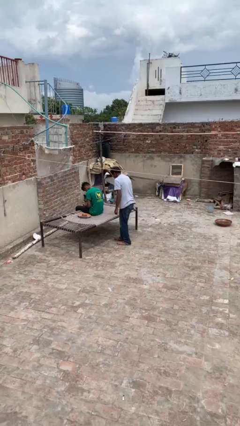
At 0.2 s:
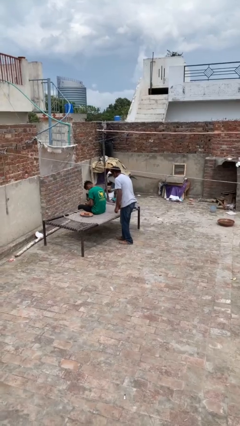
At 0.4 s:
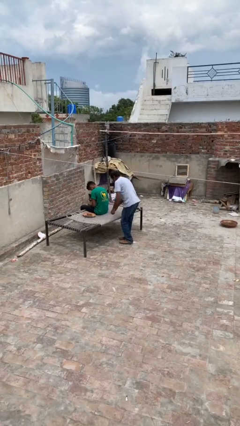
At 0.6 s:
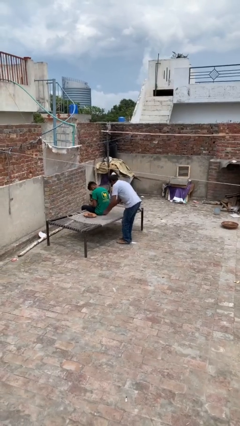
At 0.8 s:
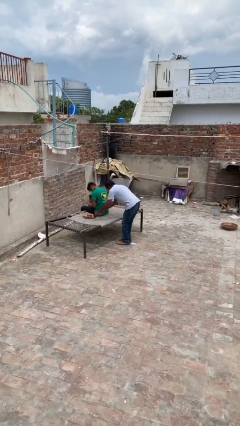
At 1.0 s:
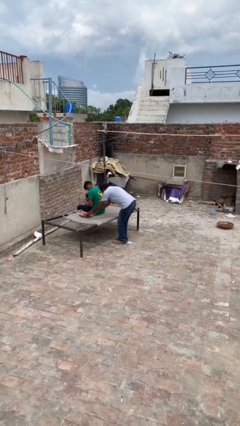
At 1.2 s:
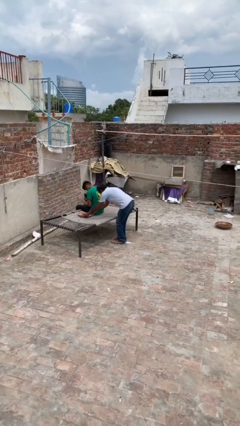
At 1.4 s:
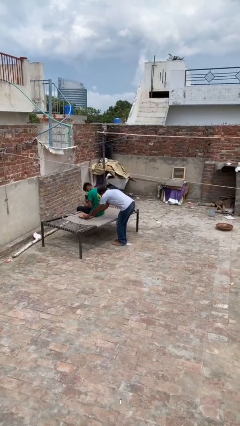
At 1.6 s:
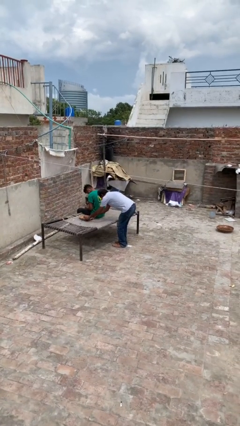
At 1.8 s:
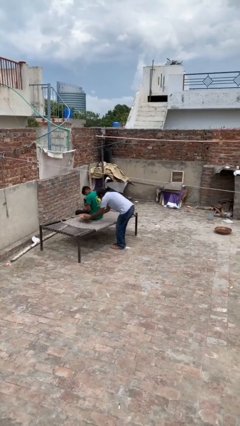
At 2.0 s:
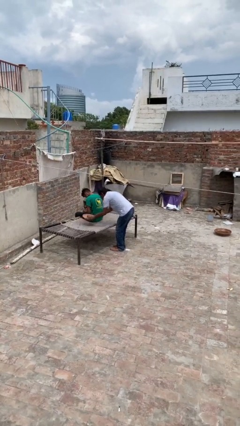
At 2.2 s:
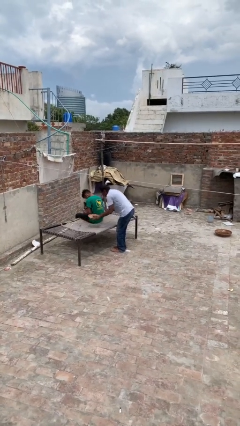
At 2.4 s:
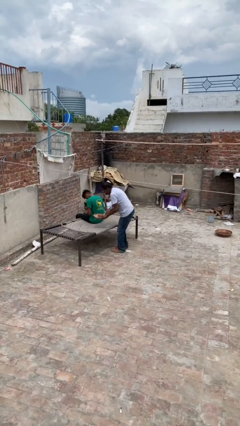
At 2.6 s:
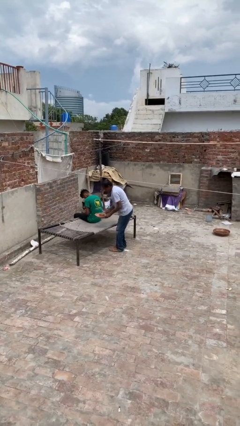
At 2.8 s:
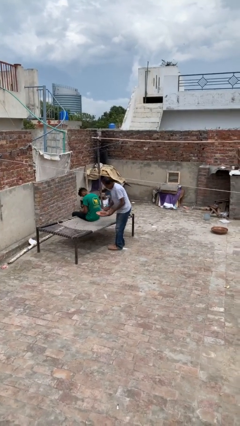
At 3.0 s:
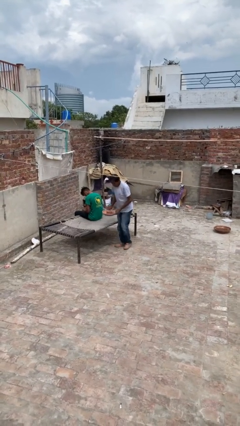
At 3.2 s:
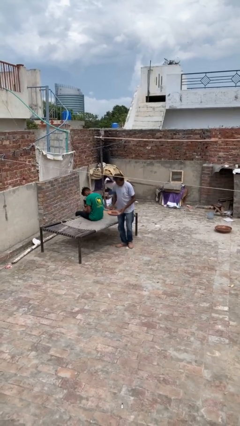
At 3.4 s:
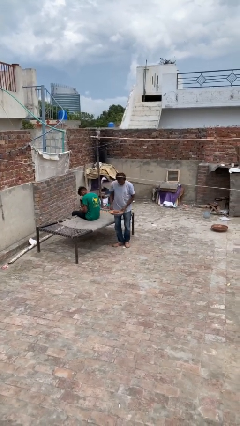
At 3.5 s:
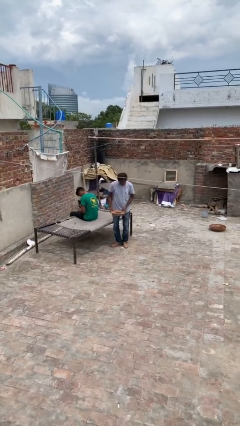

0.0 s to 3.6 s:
person steals object from person

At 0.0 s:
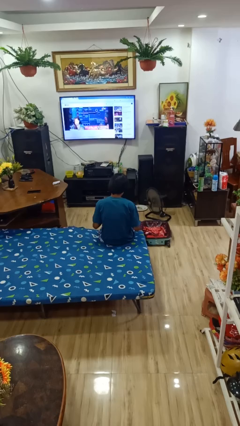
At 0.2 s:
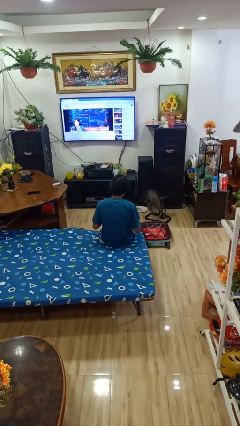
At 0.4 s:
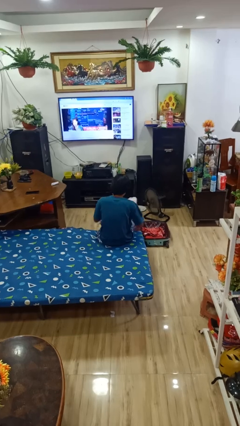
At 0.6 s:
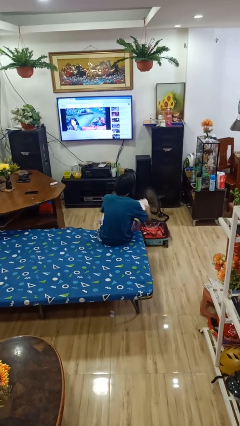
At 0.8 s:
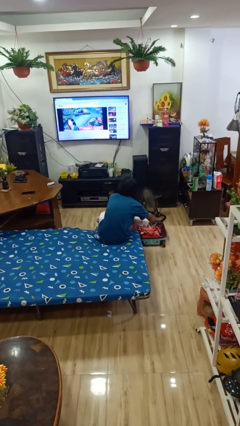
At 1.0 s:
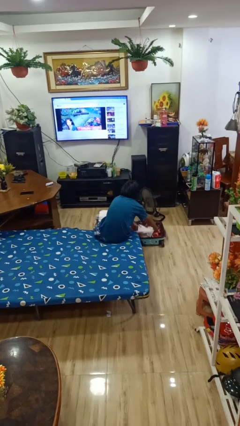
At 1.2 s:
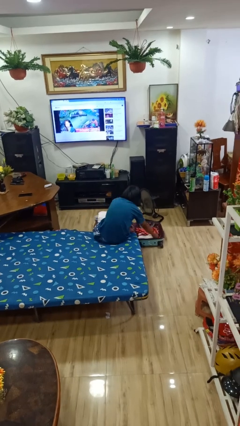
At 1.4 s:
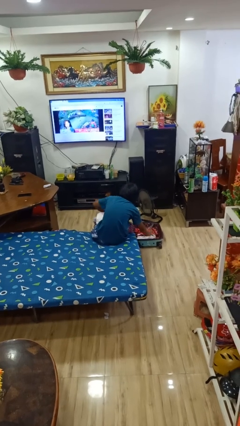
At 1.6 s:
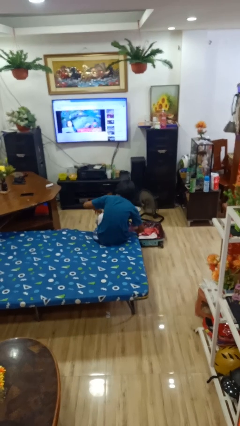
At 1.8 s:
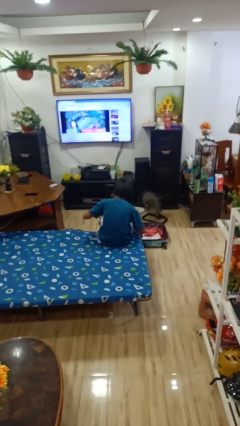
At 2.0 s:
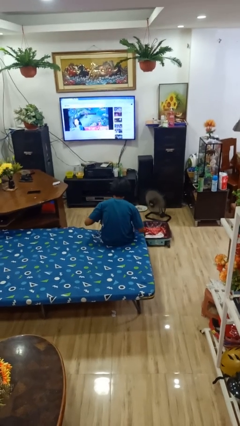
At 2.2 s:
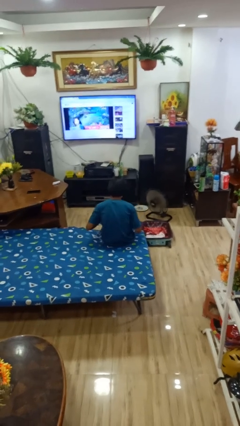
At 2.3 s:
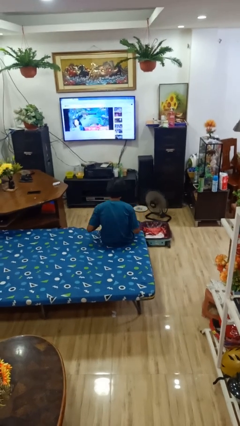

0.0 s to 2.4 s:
person loads clothes into suitcase

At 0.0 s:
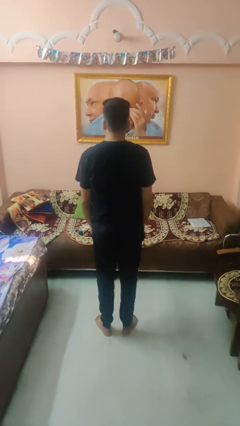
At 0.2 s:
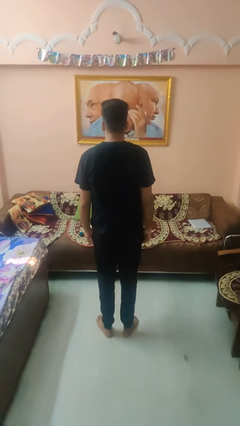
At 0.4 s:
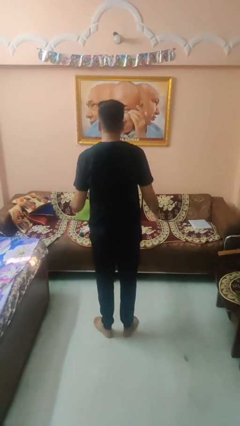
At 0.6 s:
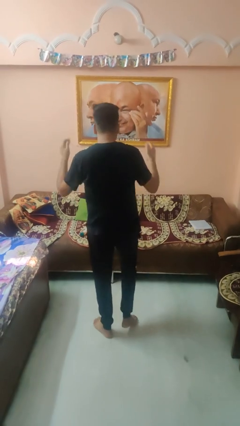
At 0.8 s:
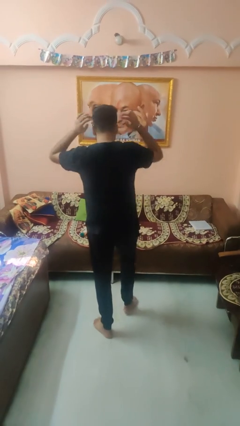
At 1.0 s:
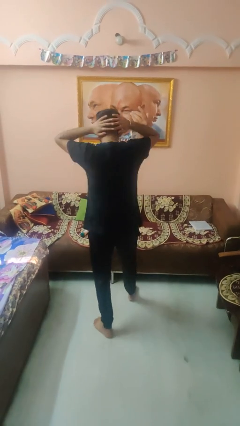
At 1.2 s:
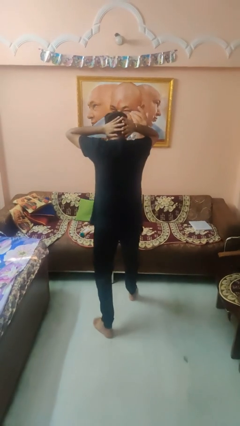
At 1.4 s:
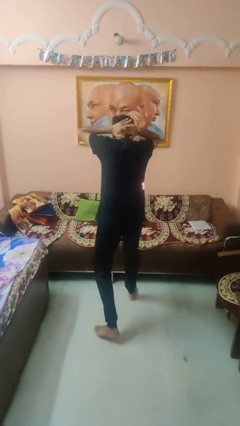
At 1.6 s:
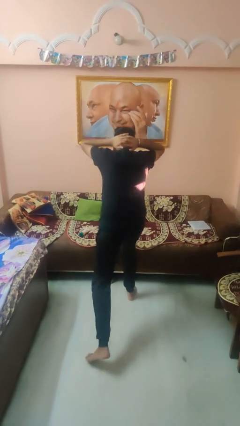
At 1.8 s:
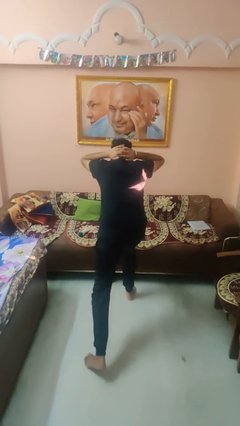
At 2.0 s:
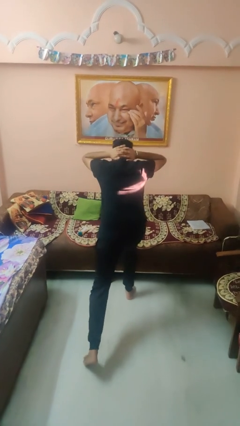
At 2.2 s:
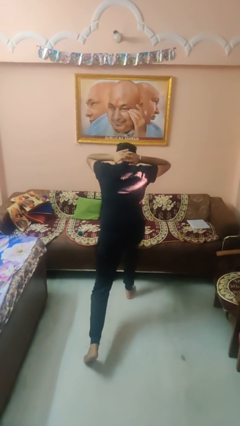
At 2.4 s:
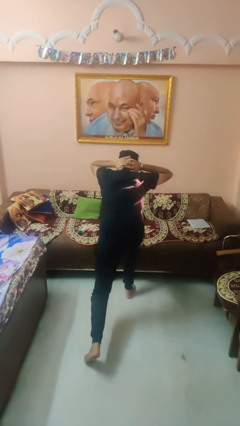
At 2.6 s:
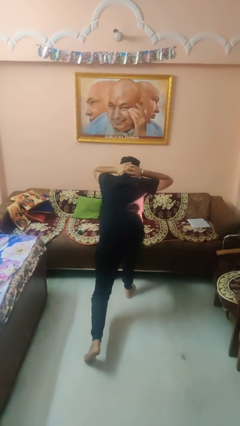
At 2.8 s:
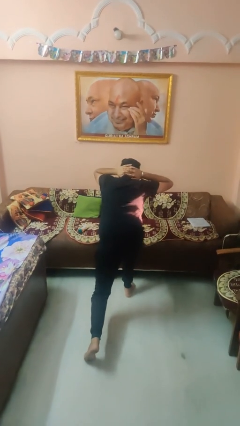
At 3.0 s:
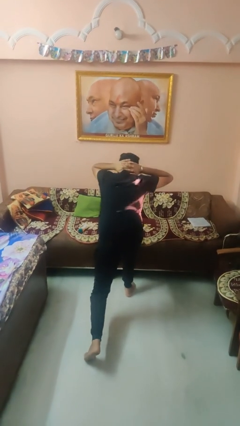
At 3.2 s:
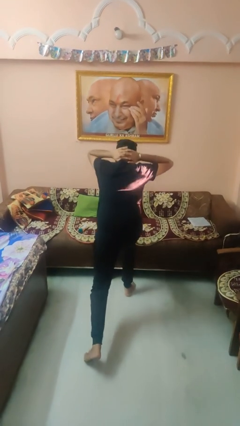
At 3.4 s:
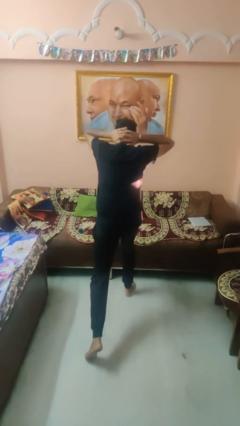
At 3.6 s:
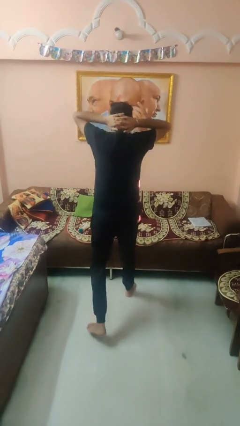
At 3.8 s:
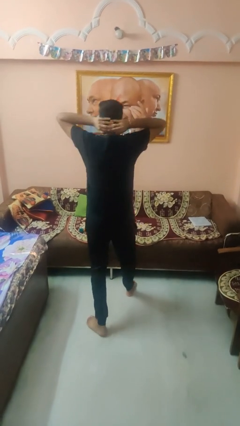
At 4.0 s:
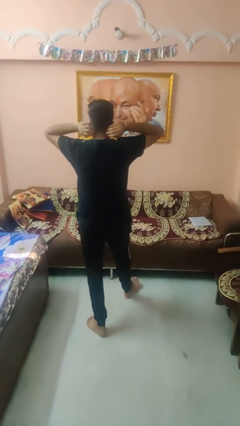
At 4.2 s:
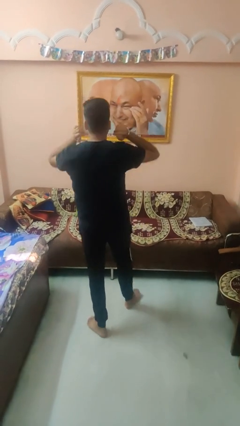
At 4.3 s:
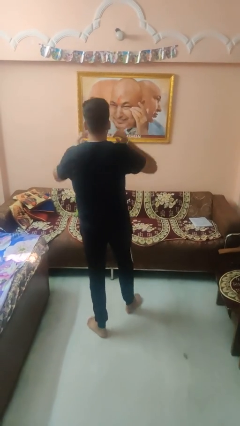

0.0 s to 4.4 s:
person exercises with lunges

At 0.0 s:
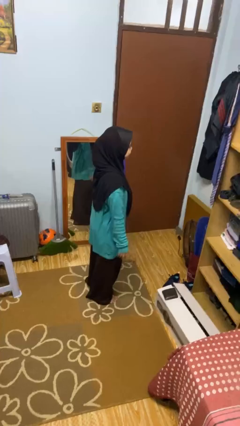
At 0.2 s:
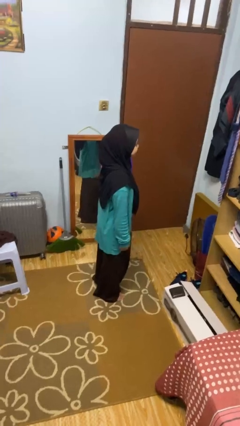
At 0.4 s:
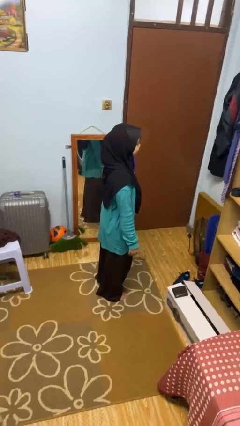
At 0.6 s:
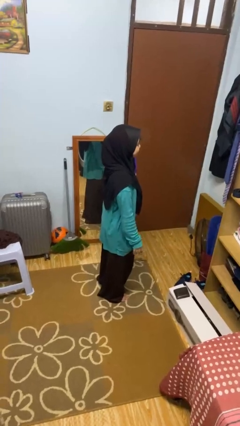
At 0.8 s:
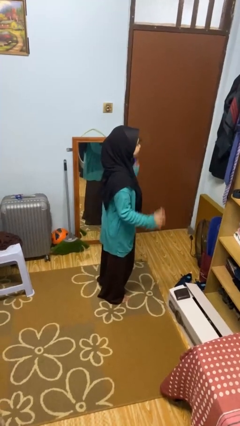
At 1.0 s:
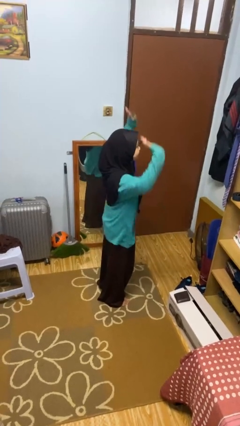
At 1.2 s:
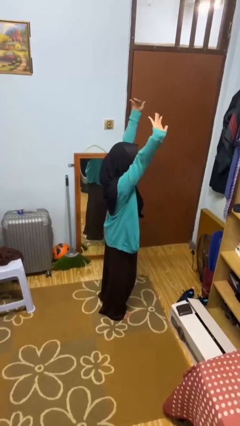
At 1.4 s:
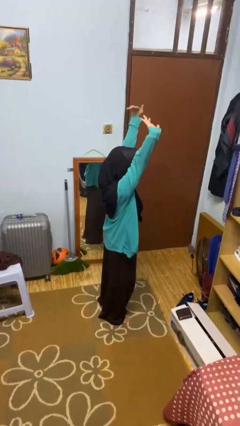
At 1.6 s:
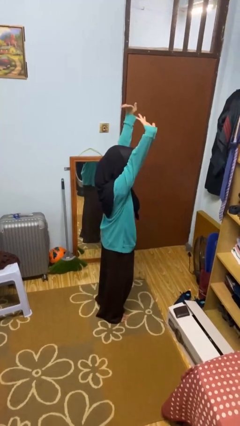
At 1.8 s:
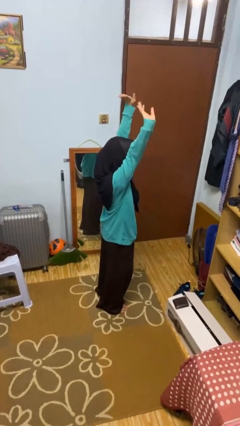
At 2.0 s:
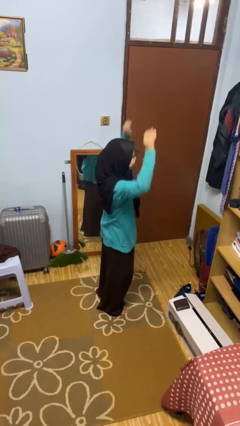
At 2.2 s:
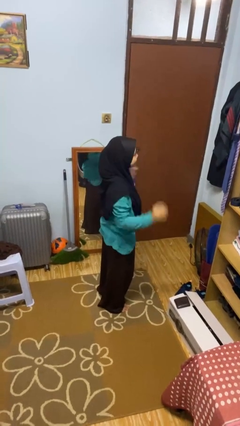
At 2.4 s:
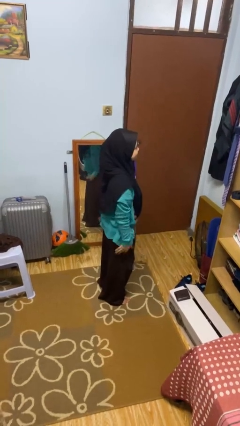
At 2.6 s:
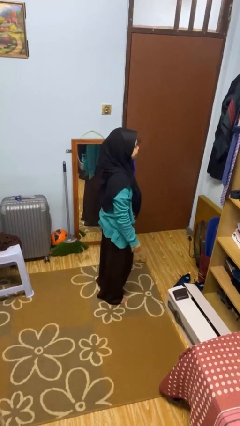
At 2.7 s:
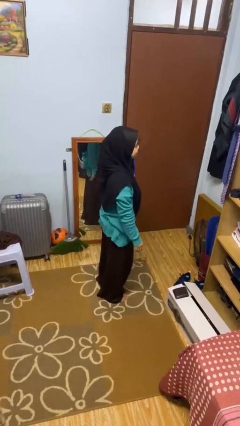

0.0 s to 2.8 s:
person stretches arms over head

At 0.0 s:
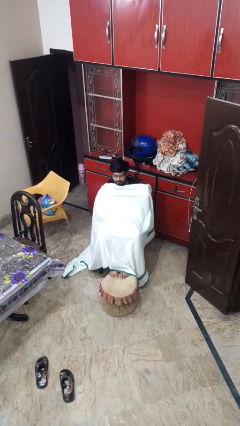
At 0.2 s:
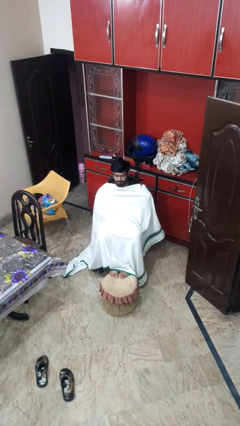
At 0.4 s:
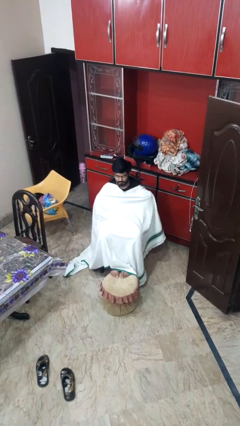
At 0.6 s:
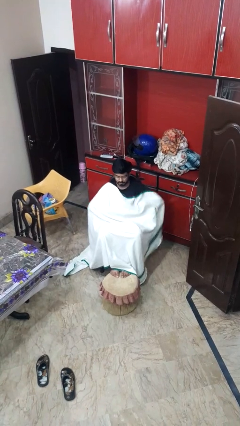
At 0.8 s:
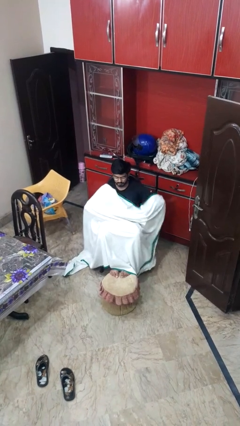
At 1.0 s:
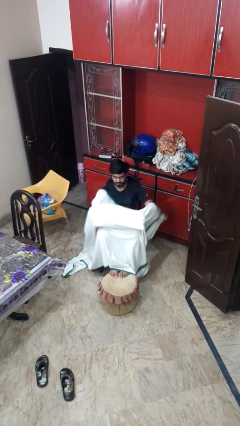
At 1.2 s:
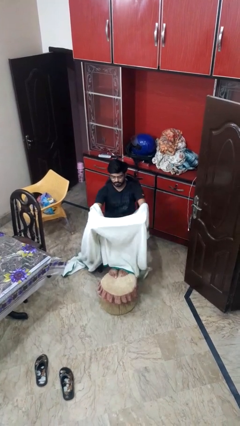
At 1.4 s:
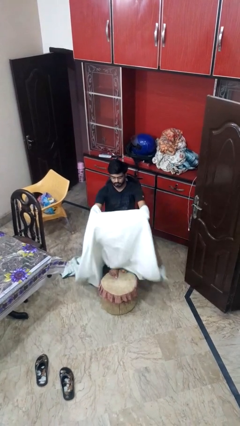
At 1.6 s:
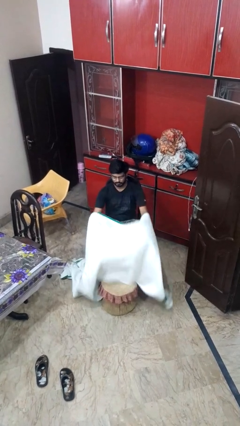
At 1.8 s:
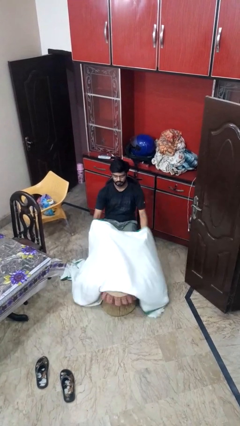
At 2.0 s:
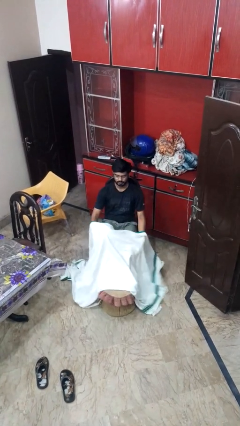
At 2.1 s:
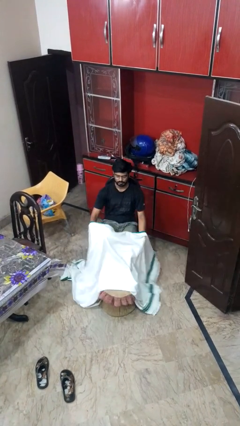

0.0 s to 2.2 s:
person uncovers with blanket

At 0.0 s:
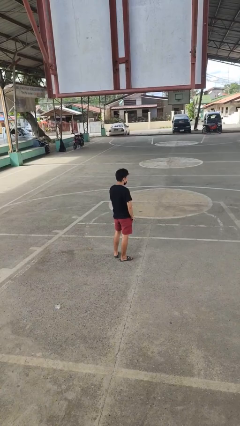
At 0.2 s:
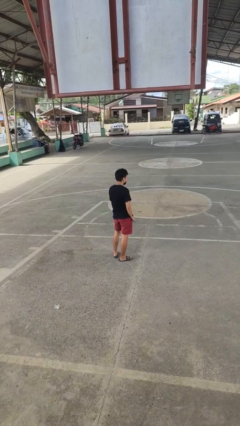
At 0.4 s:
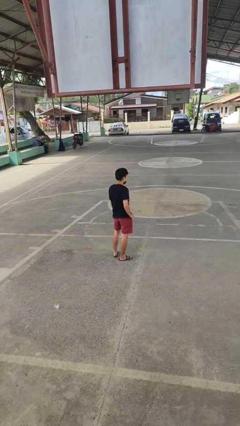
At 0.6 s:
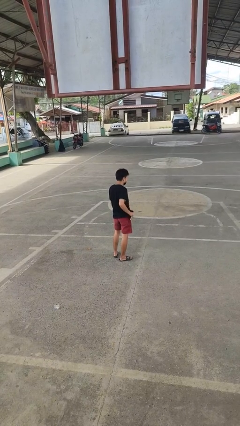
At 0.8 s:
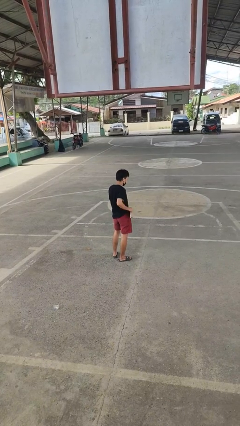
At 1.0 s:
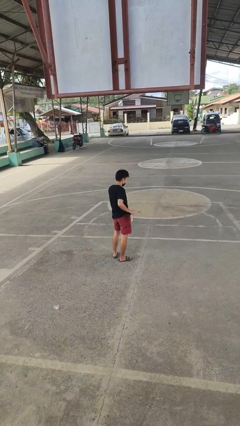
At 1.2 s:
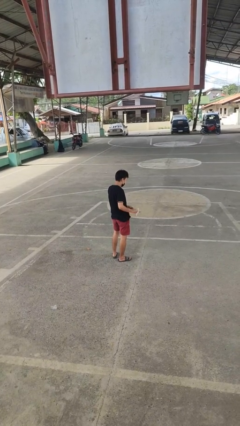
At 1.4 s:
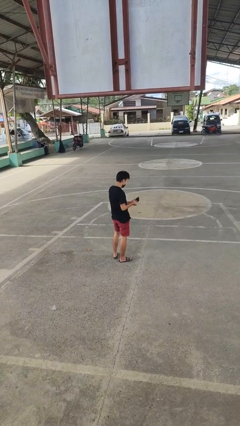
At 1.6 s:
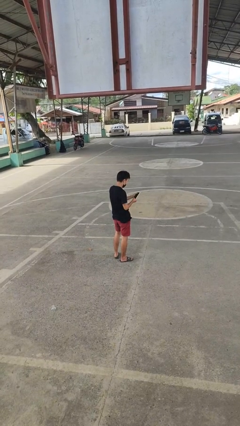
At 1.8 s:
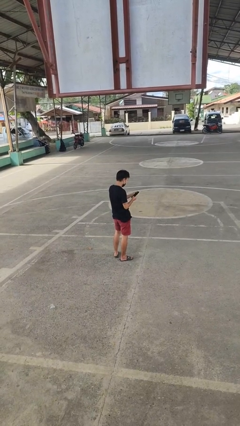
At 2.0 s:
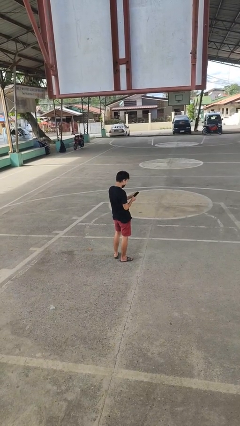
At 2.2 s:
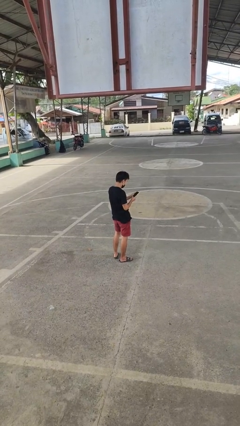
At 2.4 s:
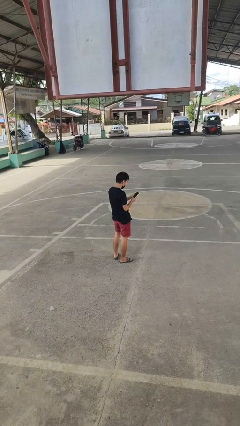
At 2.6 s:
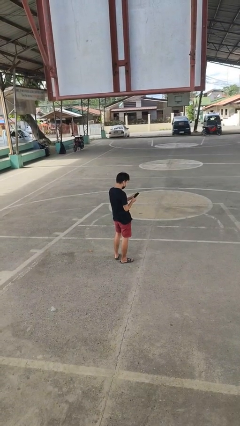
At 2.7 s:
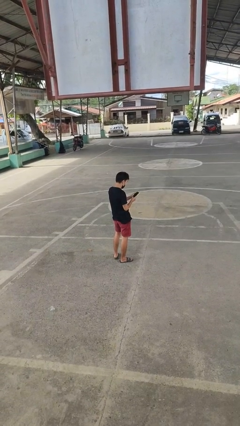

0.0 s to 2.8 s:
person takes phone from pocket
